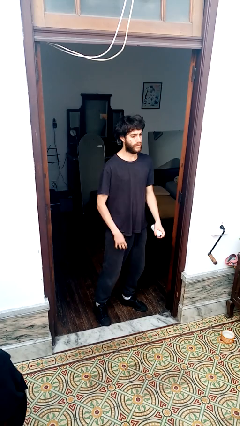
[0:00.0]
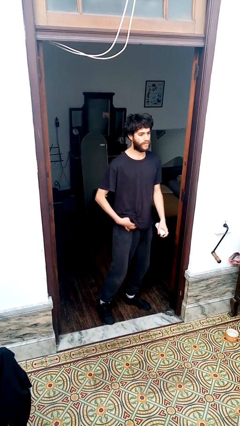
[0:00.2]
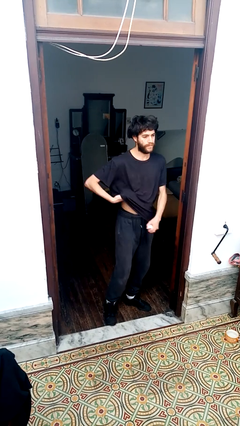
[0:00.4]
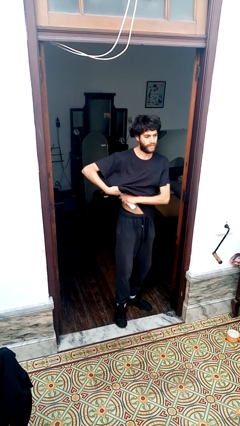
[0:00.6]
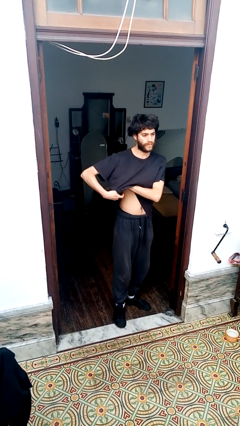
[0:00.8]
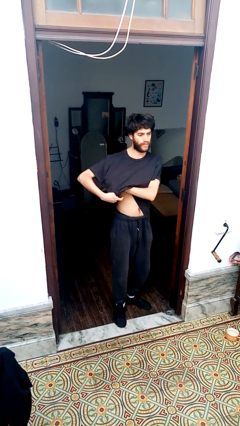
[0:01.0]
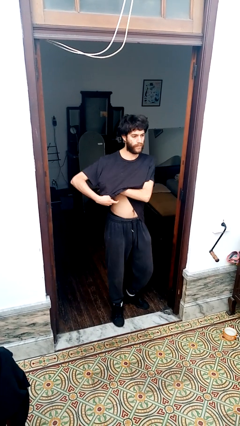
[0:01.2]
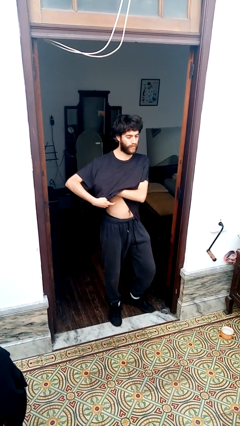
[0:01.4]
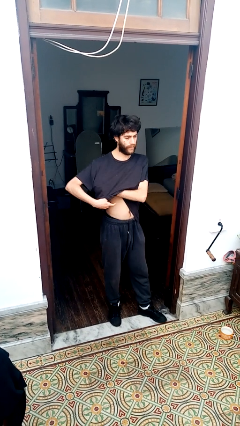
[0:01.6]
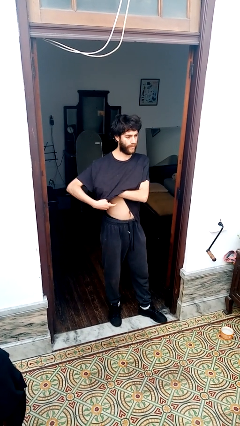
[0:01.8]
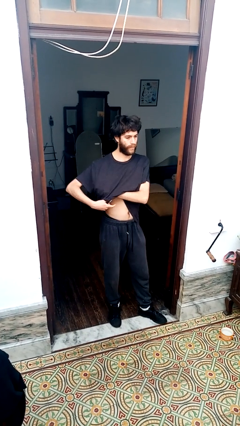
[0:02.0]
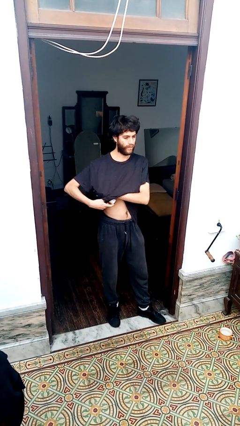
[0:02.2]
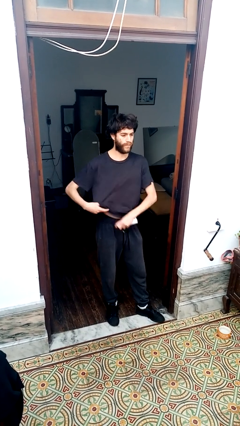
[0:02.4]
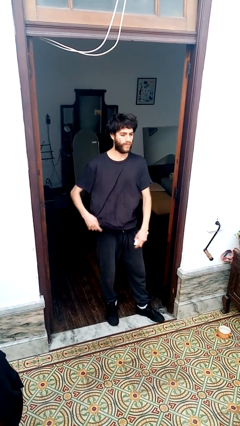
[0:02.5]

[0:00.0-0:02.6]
person applies deodorant

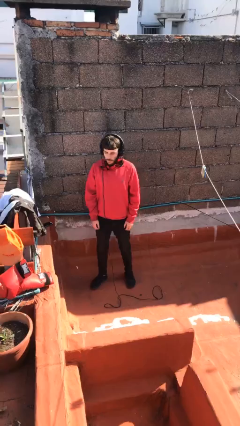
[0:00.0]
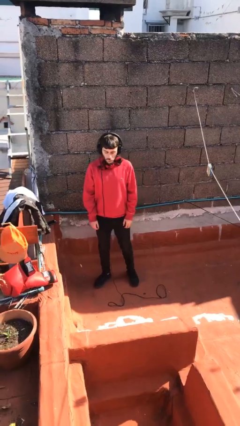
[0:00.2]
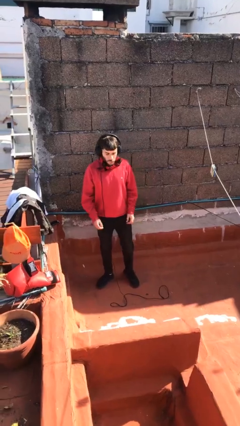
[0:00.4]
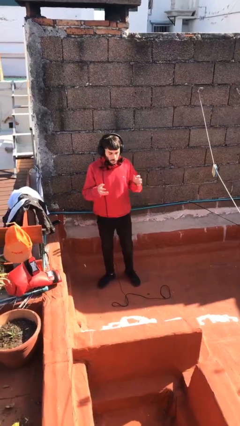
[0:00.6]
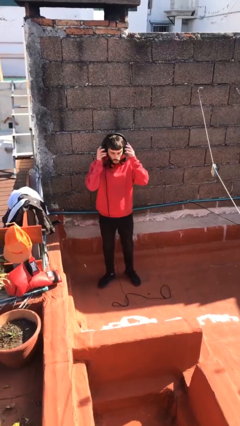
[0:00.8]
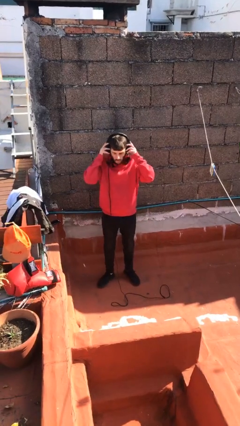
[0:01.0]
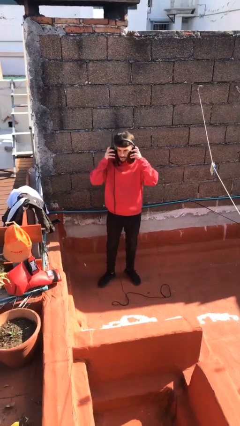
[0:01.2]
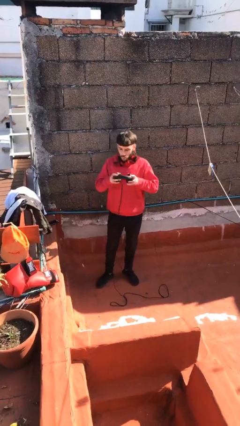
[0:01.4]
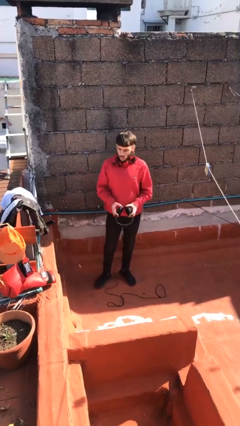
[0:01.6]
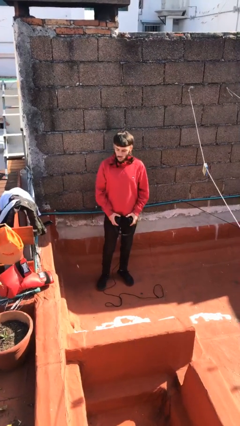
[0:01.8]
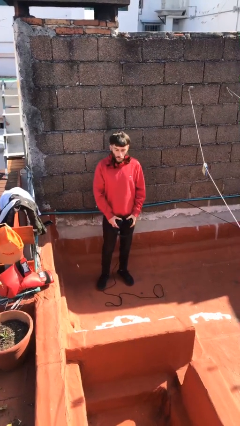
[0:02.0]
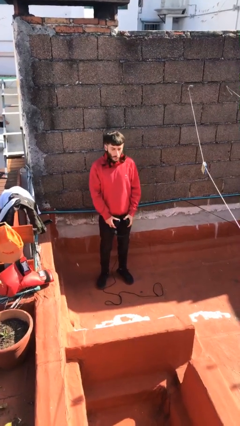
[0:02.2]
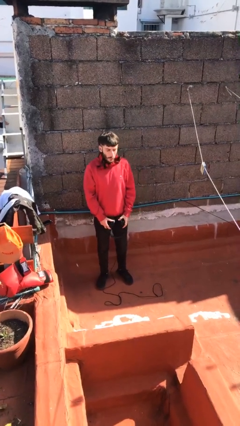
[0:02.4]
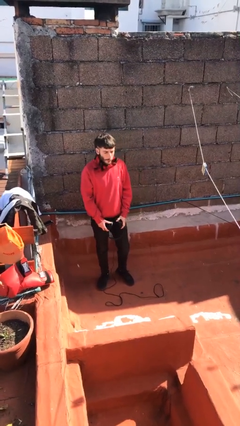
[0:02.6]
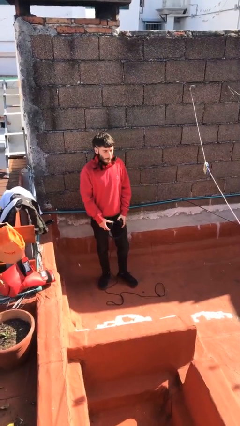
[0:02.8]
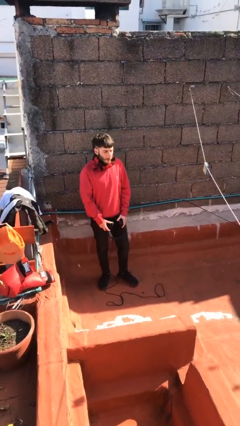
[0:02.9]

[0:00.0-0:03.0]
person takes off headphones

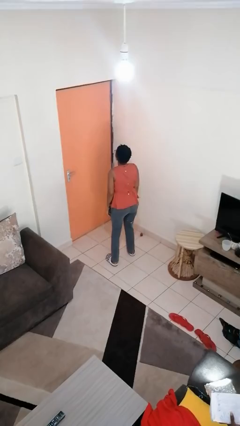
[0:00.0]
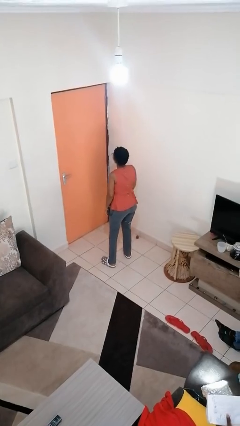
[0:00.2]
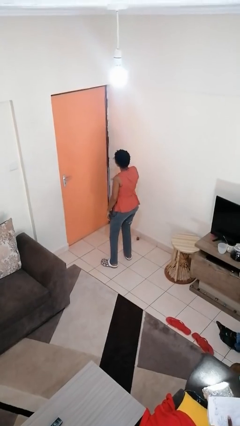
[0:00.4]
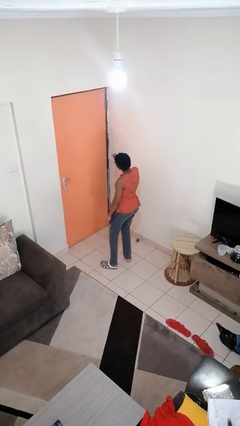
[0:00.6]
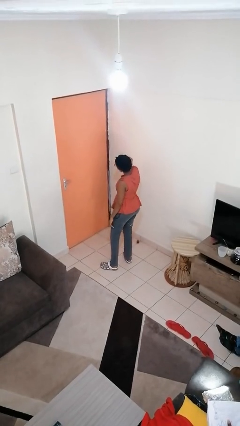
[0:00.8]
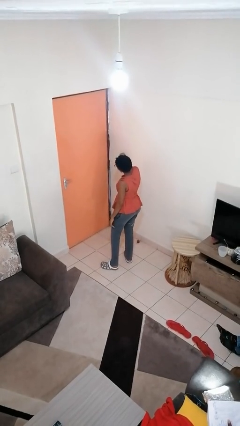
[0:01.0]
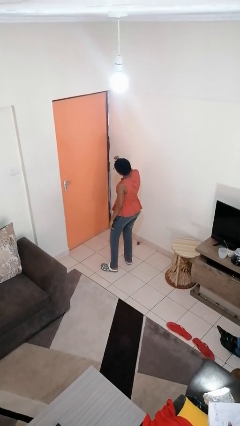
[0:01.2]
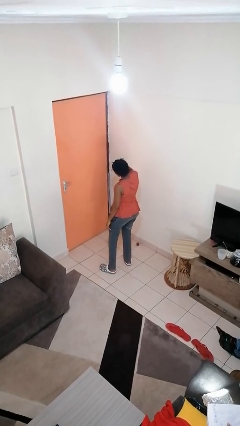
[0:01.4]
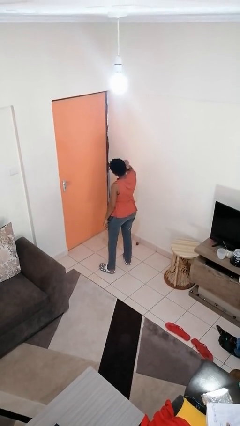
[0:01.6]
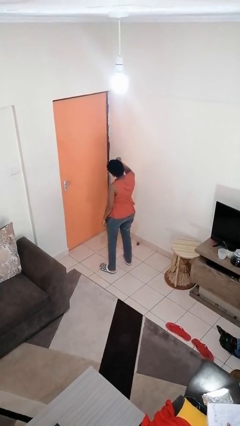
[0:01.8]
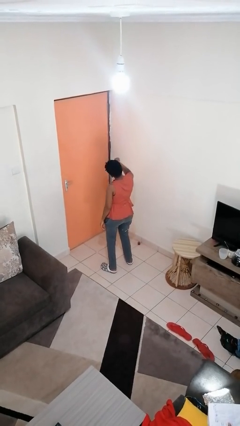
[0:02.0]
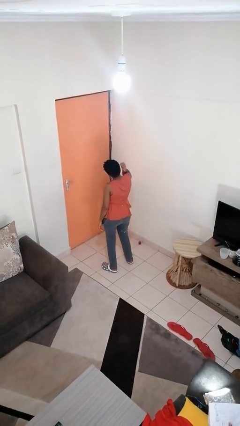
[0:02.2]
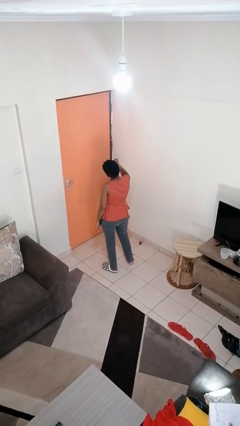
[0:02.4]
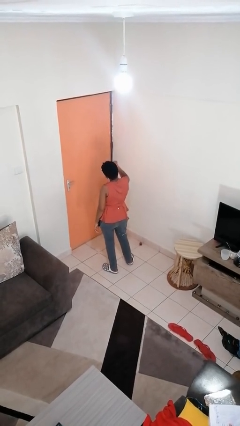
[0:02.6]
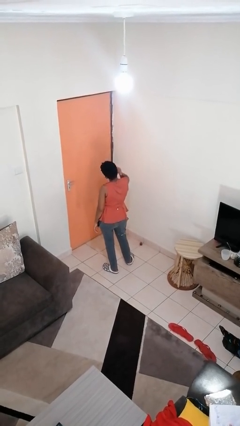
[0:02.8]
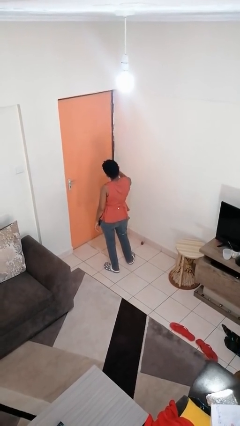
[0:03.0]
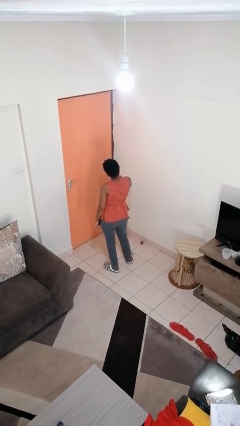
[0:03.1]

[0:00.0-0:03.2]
person gestures behind me

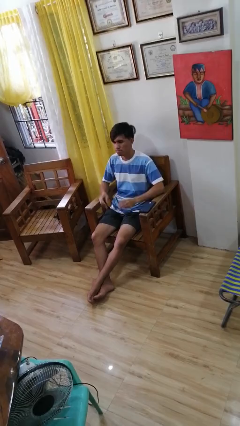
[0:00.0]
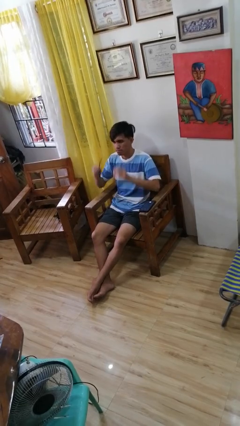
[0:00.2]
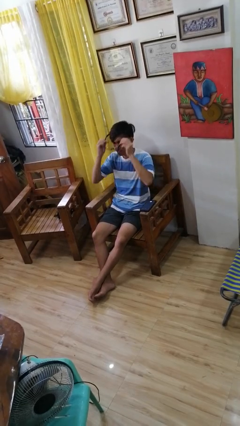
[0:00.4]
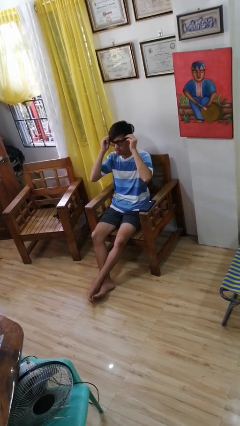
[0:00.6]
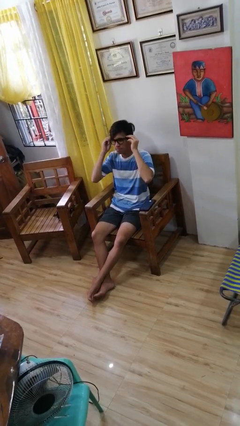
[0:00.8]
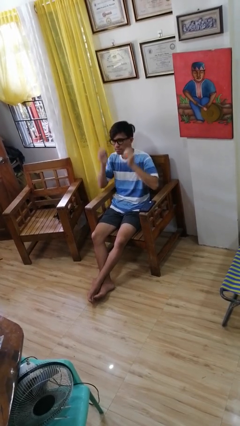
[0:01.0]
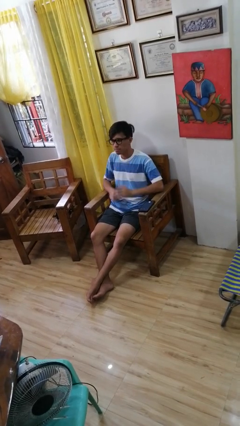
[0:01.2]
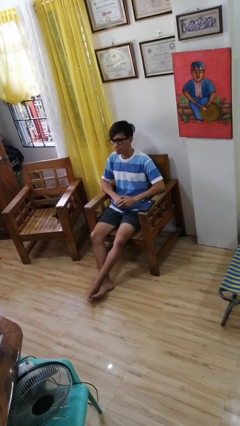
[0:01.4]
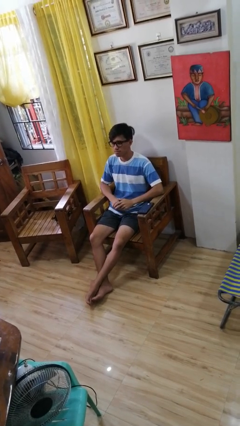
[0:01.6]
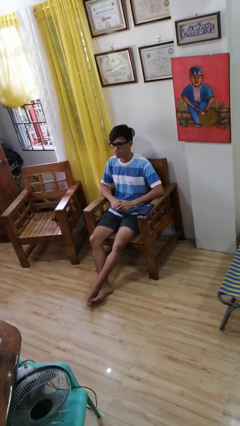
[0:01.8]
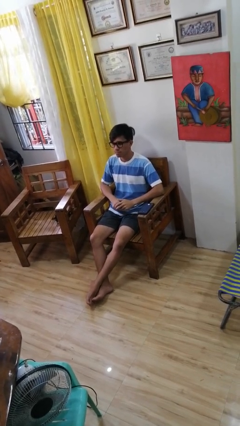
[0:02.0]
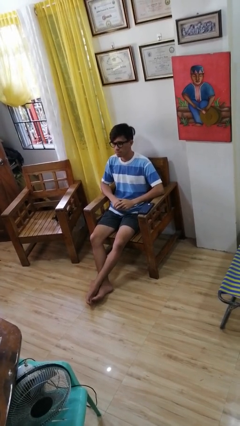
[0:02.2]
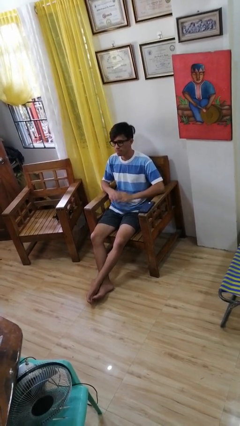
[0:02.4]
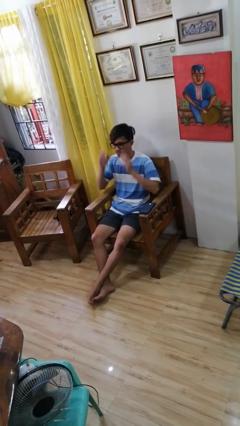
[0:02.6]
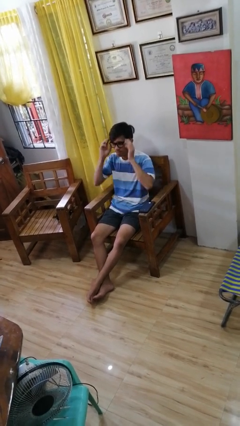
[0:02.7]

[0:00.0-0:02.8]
person puts on glasses

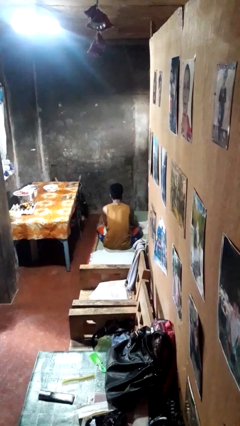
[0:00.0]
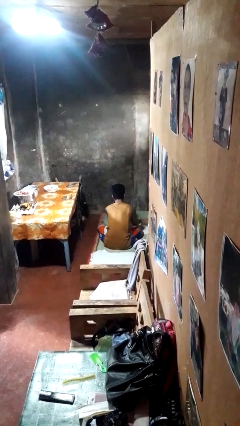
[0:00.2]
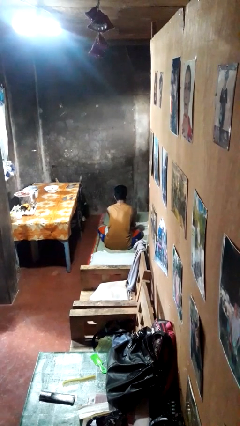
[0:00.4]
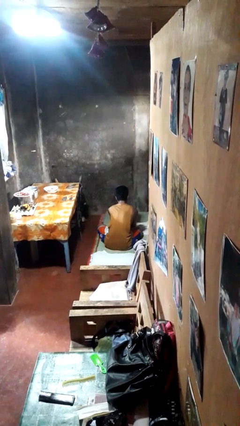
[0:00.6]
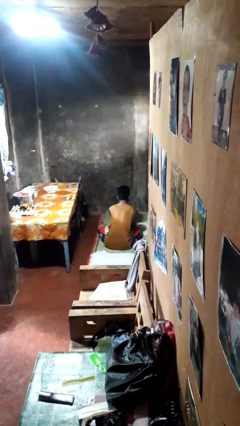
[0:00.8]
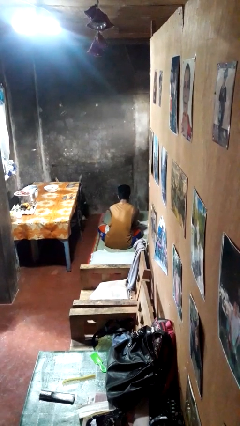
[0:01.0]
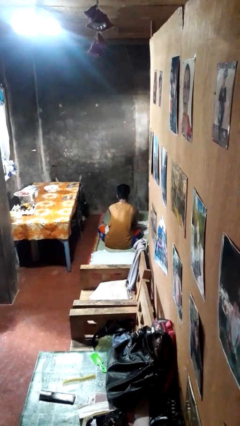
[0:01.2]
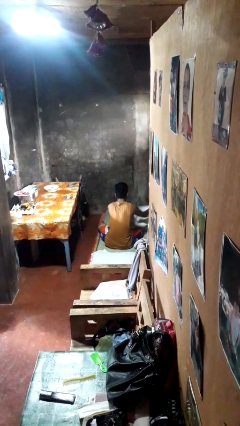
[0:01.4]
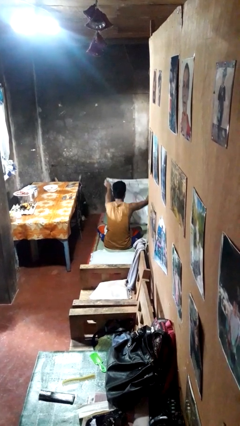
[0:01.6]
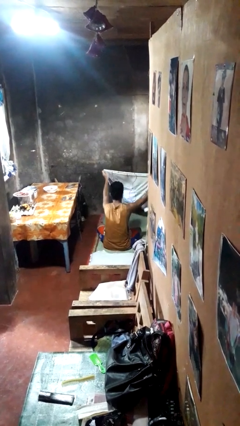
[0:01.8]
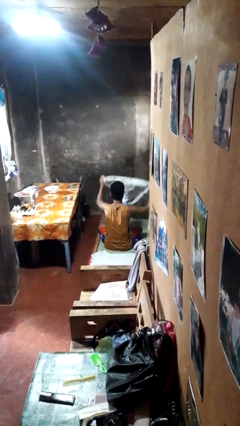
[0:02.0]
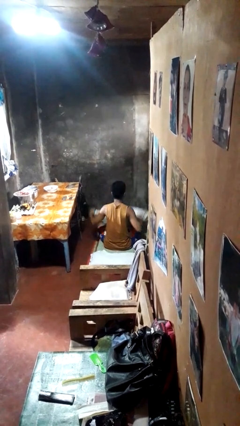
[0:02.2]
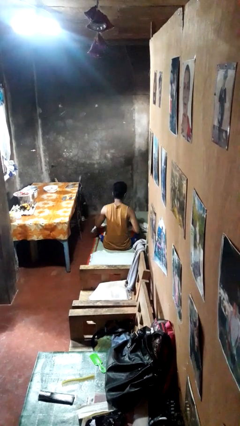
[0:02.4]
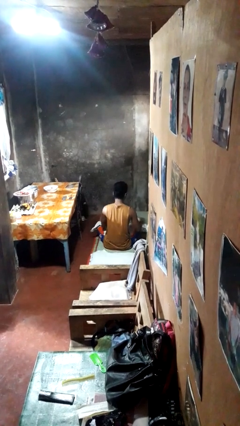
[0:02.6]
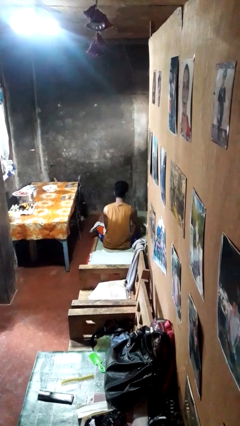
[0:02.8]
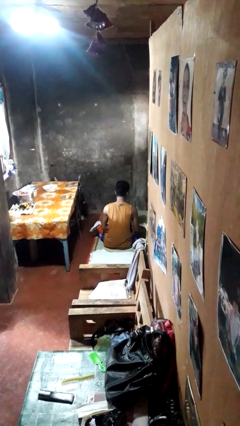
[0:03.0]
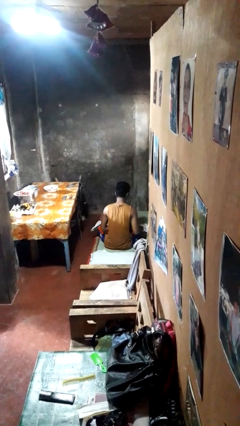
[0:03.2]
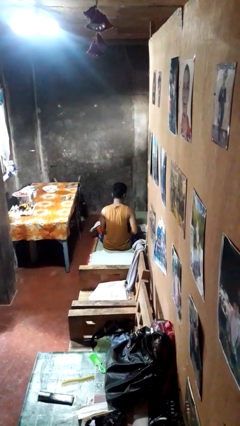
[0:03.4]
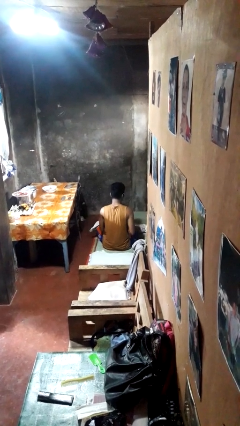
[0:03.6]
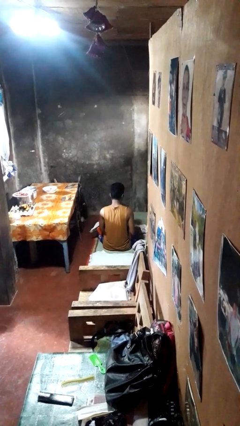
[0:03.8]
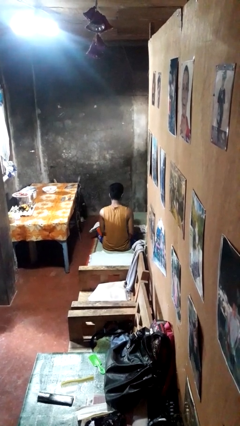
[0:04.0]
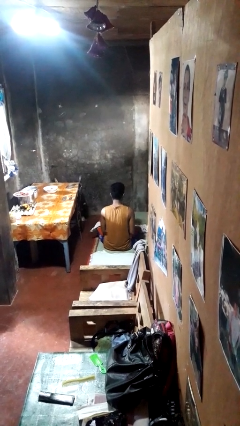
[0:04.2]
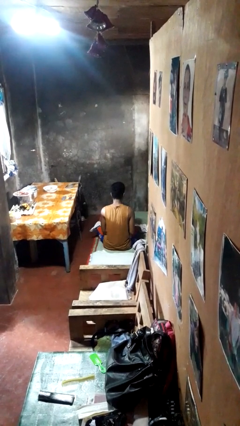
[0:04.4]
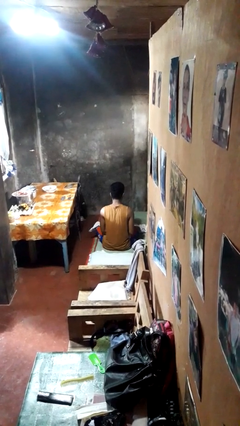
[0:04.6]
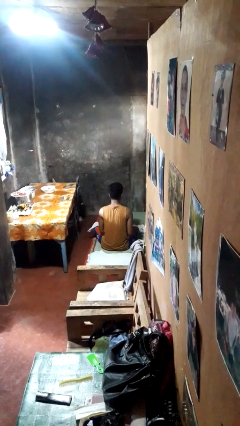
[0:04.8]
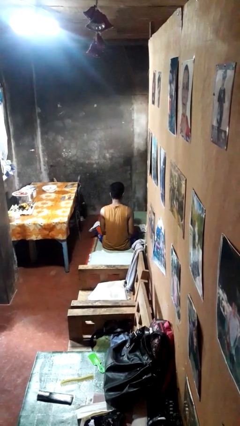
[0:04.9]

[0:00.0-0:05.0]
person unfolds blanket

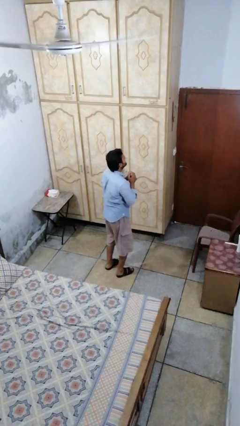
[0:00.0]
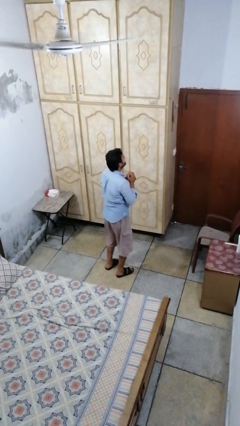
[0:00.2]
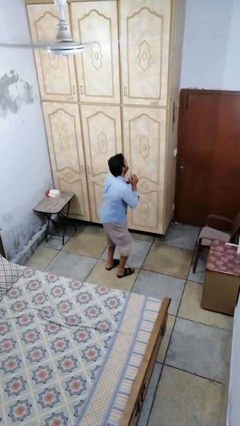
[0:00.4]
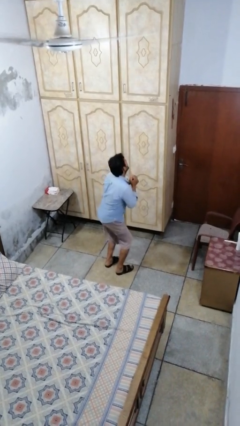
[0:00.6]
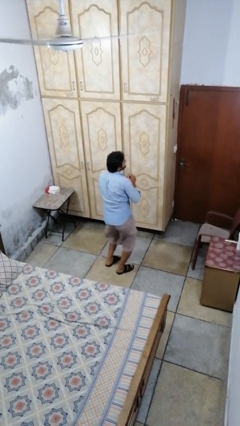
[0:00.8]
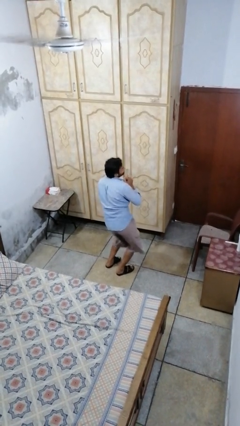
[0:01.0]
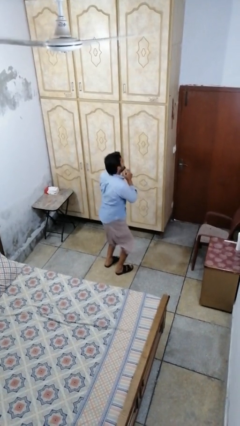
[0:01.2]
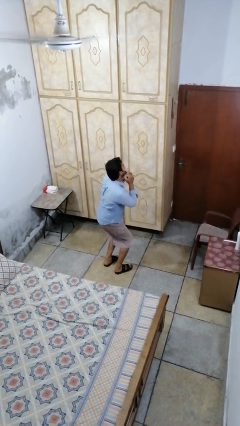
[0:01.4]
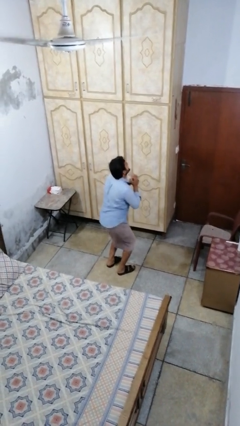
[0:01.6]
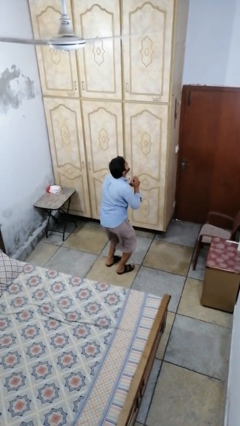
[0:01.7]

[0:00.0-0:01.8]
person wiggles hips
